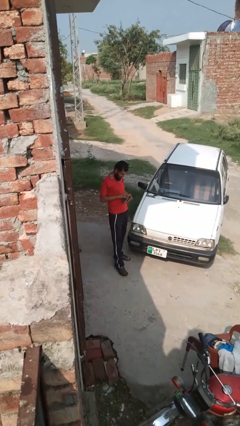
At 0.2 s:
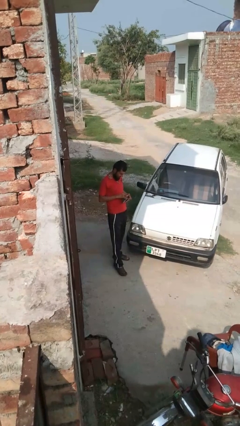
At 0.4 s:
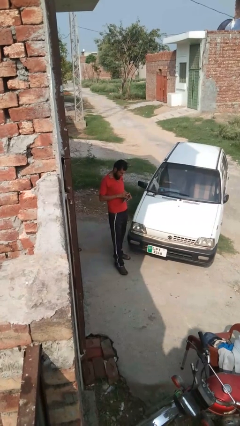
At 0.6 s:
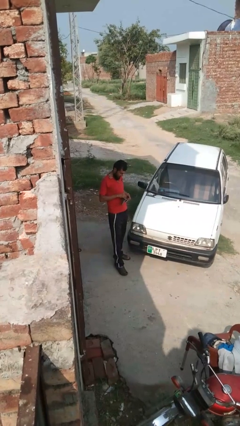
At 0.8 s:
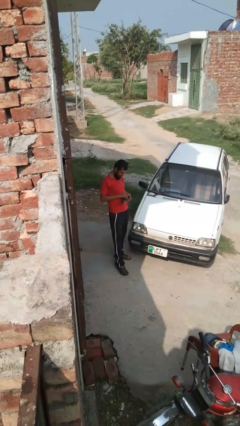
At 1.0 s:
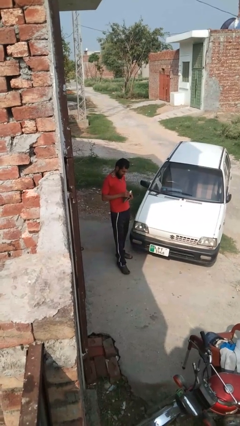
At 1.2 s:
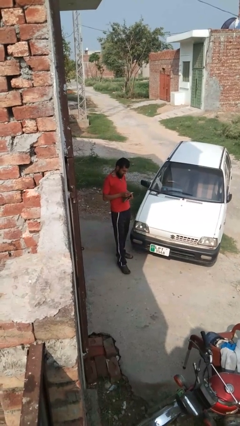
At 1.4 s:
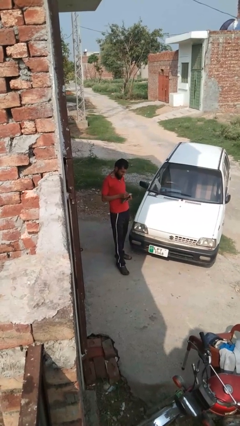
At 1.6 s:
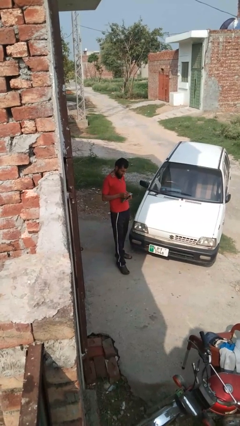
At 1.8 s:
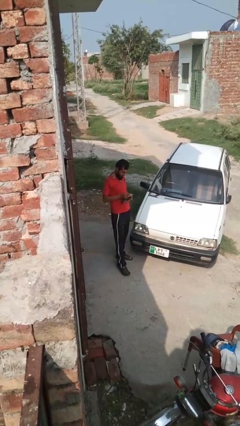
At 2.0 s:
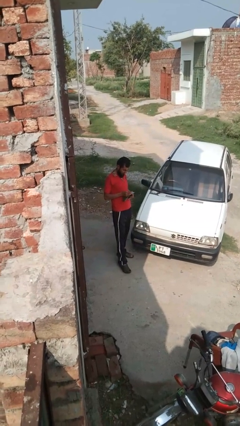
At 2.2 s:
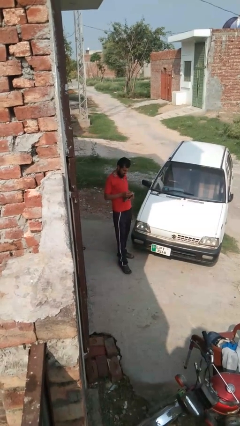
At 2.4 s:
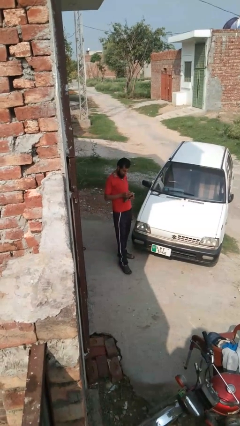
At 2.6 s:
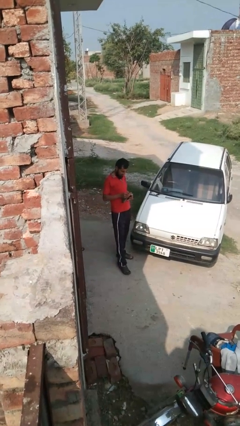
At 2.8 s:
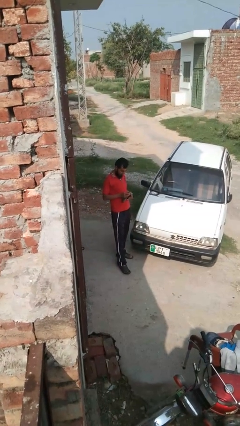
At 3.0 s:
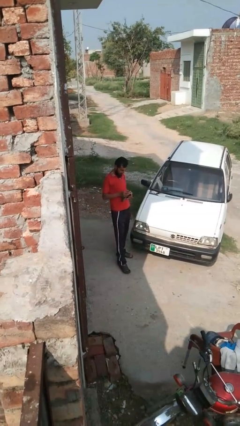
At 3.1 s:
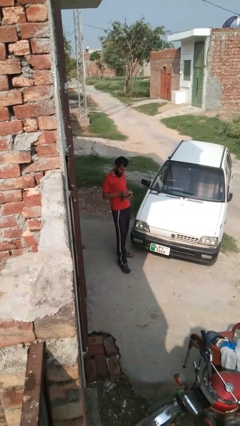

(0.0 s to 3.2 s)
person takes object from purse

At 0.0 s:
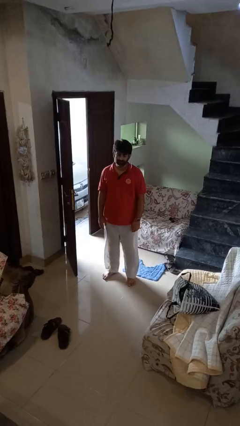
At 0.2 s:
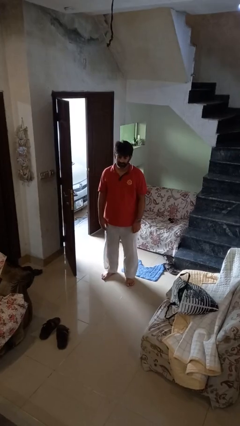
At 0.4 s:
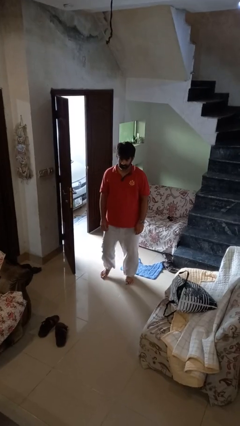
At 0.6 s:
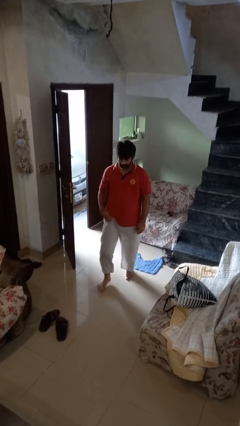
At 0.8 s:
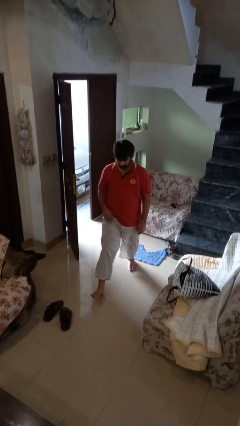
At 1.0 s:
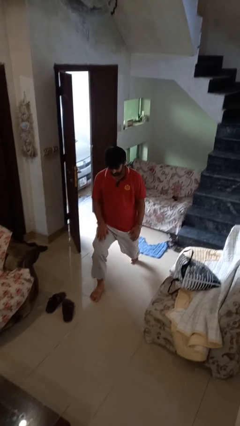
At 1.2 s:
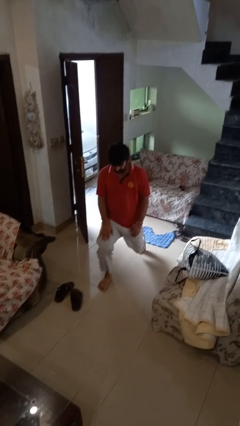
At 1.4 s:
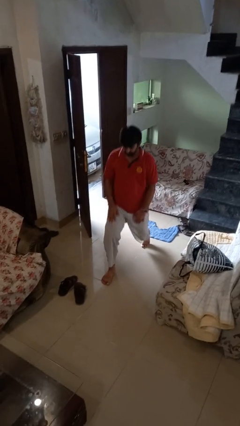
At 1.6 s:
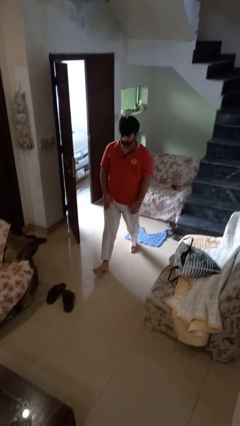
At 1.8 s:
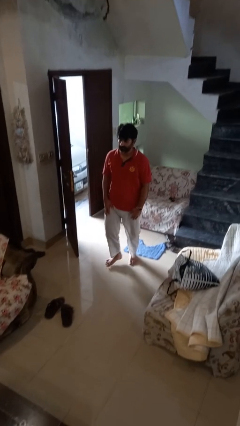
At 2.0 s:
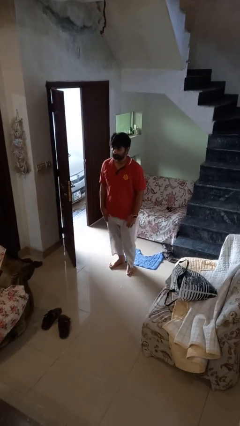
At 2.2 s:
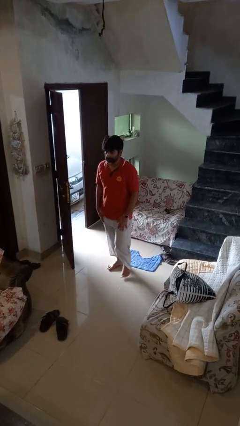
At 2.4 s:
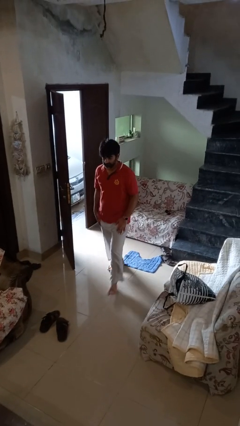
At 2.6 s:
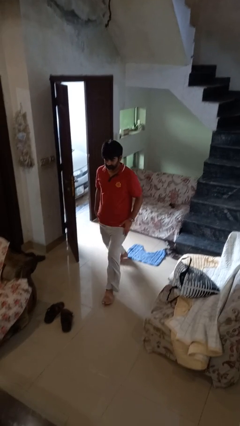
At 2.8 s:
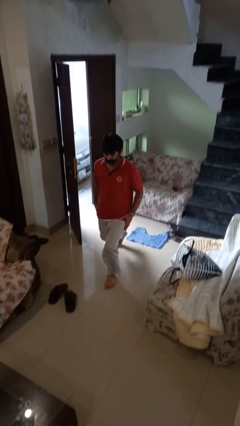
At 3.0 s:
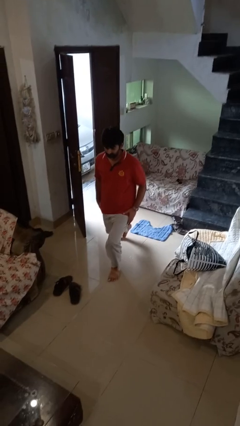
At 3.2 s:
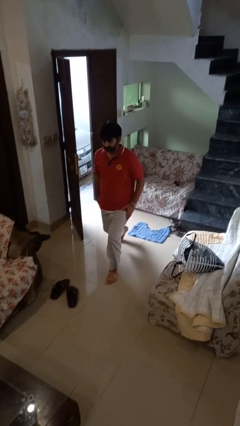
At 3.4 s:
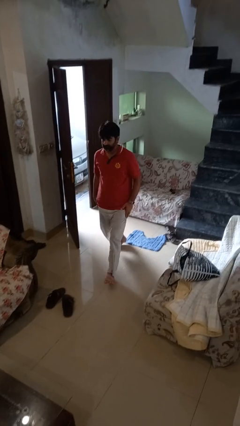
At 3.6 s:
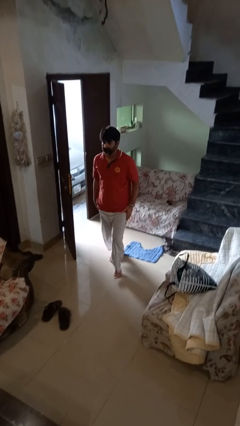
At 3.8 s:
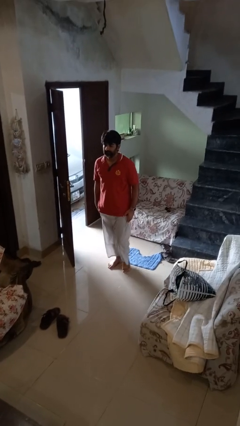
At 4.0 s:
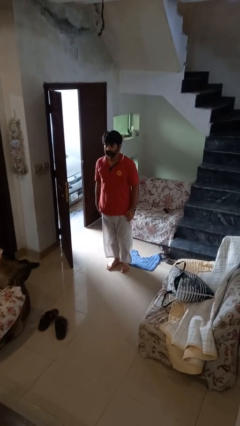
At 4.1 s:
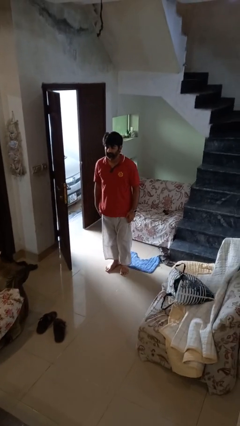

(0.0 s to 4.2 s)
person exercises with lunges

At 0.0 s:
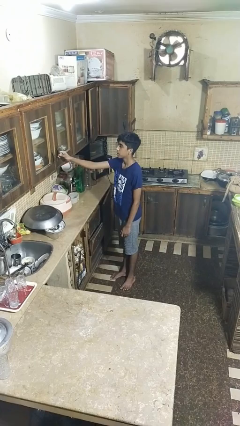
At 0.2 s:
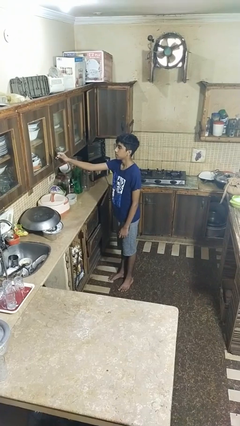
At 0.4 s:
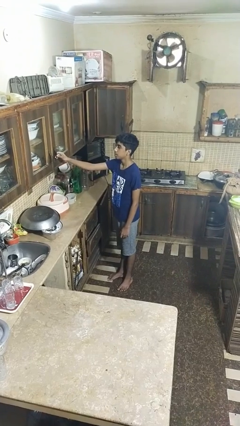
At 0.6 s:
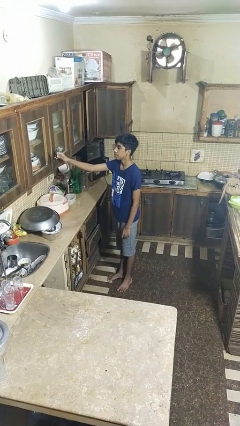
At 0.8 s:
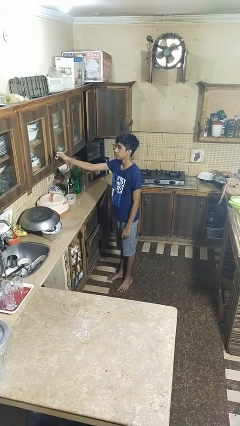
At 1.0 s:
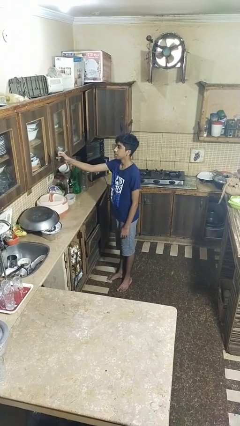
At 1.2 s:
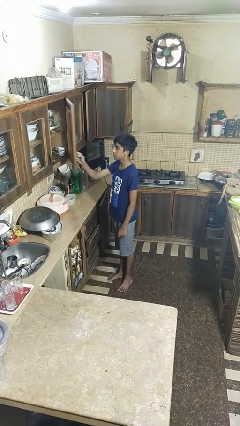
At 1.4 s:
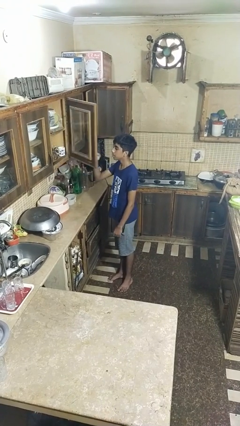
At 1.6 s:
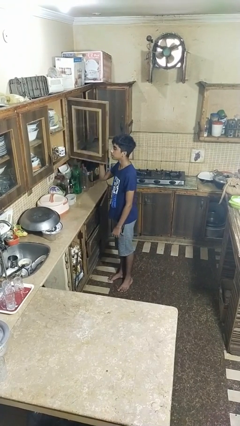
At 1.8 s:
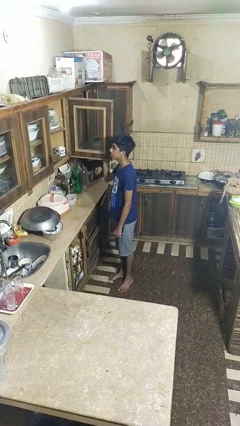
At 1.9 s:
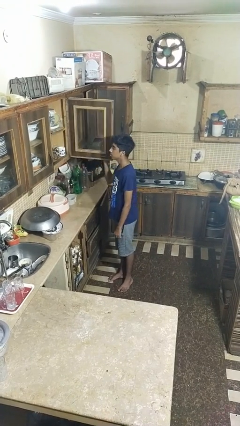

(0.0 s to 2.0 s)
person opens cabinet

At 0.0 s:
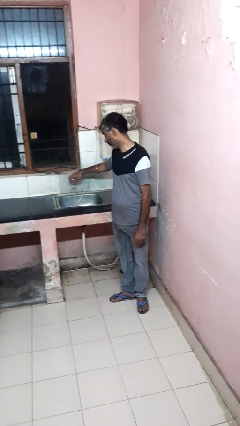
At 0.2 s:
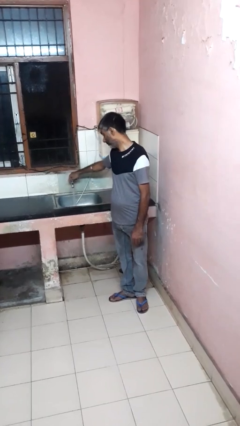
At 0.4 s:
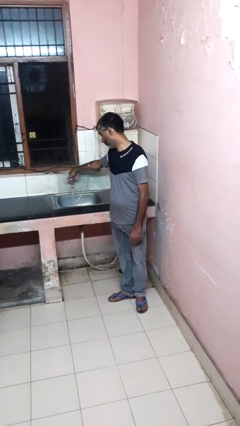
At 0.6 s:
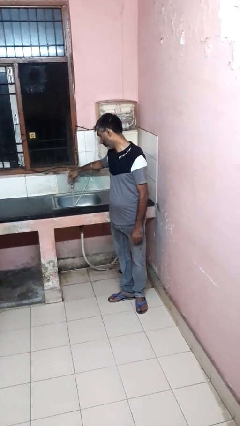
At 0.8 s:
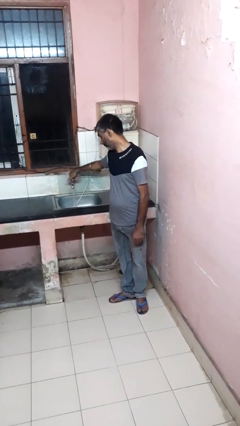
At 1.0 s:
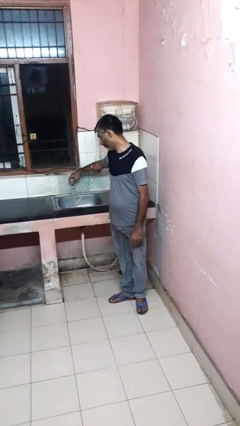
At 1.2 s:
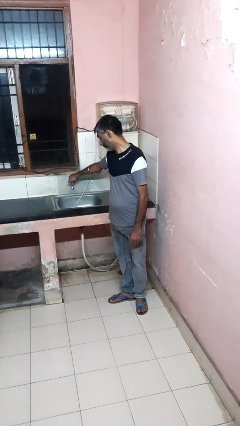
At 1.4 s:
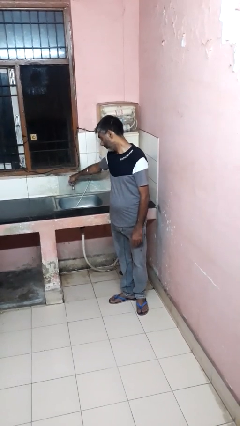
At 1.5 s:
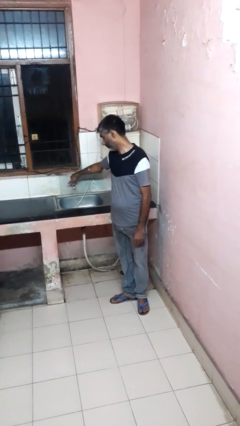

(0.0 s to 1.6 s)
person turns off faucet

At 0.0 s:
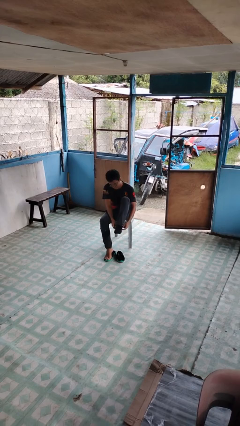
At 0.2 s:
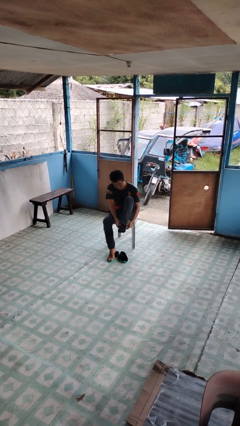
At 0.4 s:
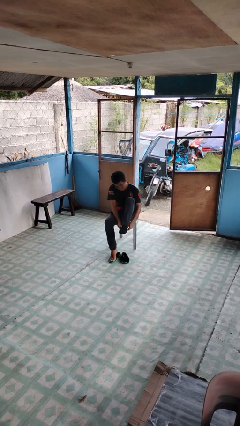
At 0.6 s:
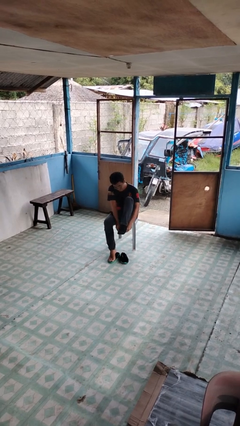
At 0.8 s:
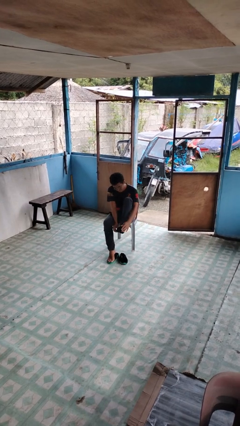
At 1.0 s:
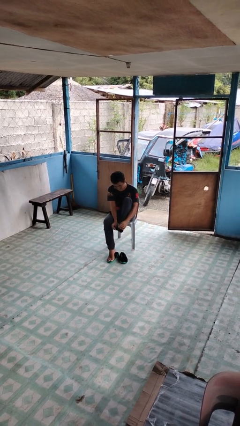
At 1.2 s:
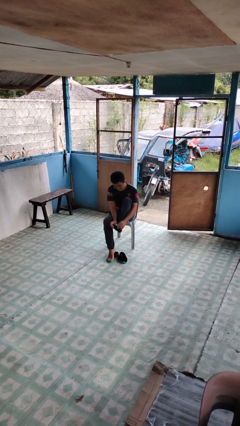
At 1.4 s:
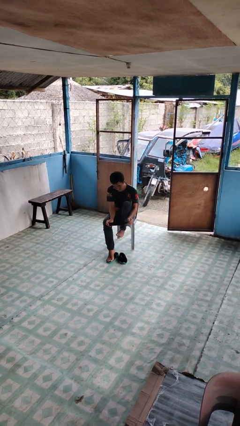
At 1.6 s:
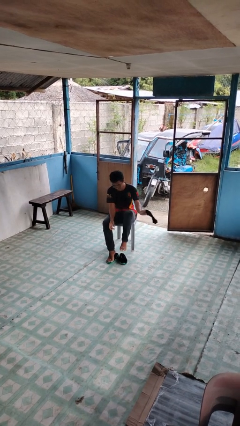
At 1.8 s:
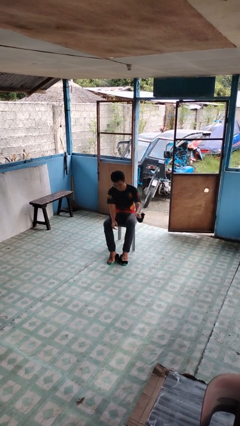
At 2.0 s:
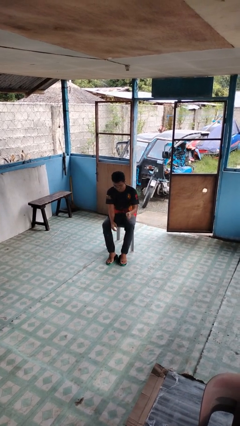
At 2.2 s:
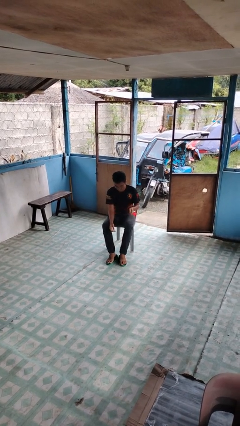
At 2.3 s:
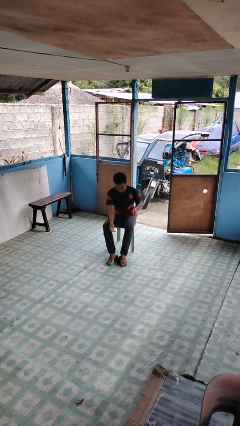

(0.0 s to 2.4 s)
person takes off socks

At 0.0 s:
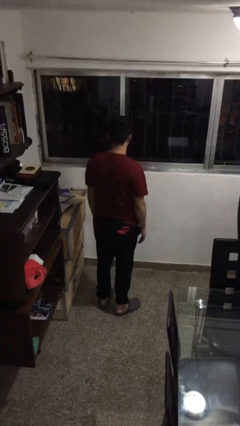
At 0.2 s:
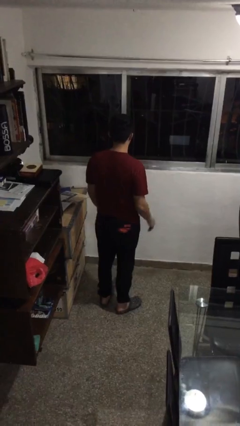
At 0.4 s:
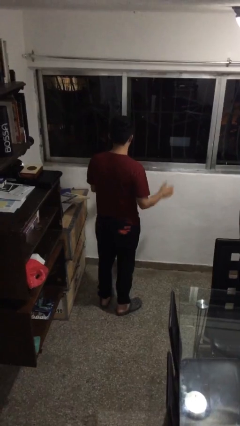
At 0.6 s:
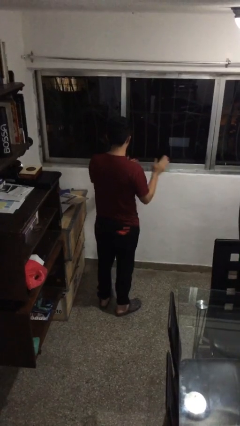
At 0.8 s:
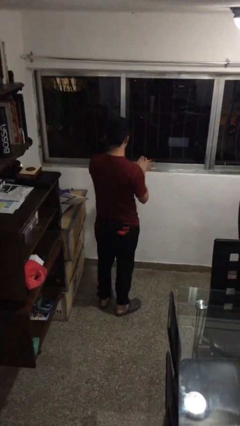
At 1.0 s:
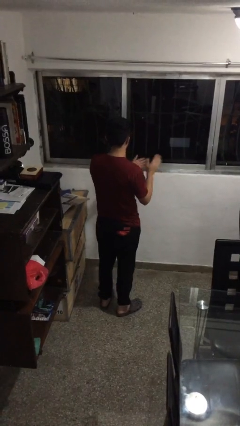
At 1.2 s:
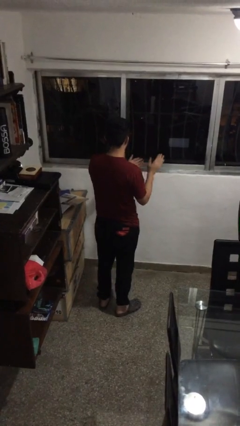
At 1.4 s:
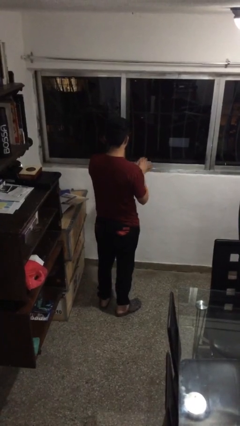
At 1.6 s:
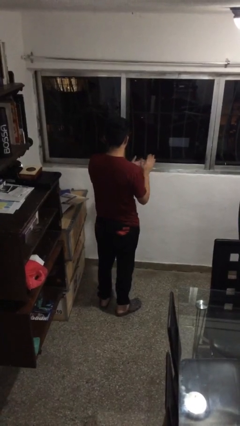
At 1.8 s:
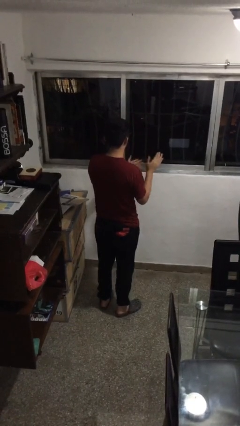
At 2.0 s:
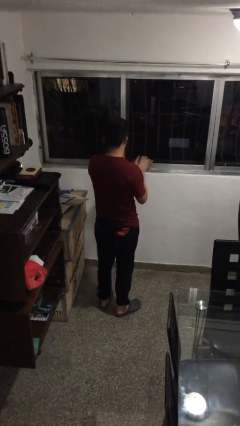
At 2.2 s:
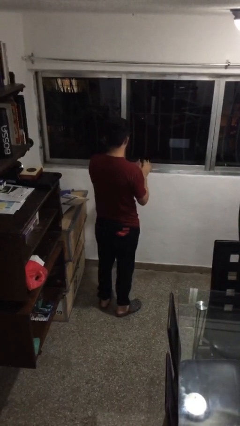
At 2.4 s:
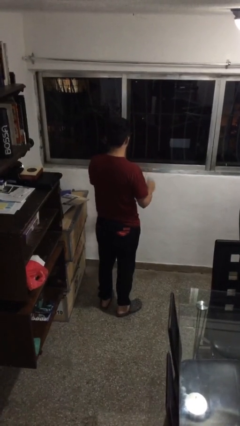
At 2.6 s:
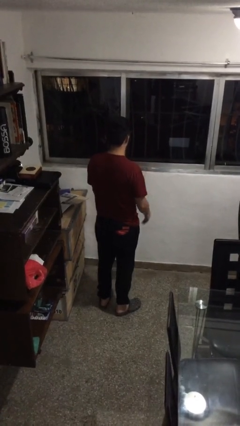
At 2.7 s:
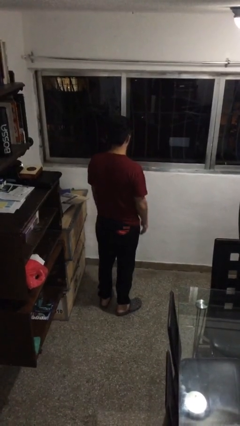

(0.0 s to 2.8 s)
person claps hands

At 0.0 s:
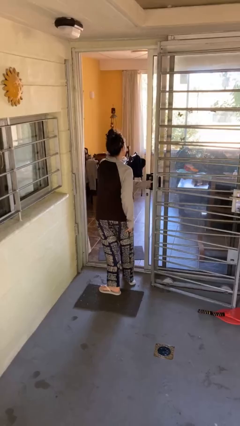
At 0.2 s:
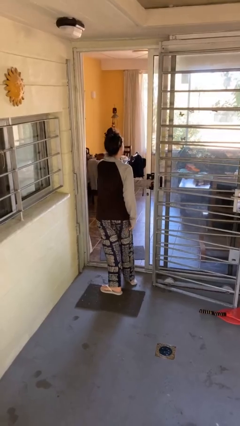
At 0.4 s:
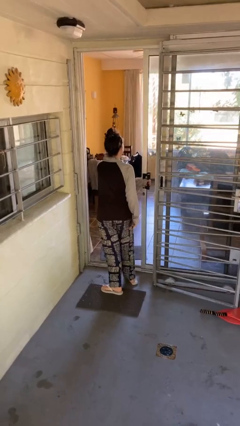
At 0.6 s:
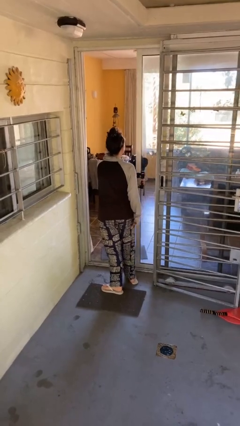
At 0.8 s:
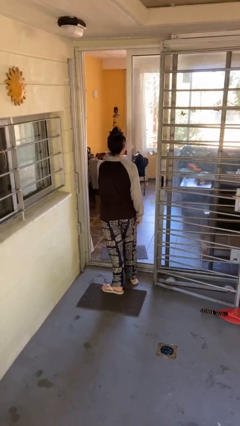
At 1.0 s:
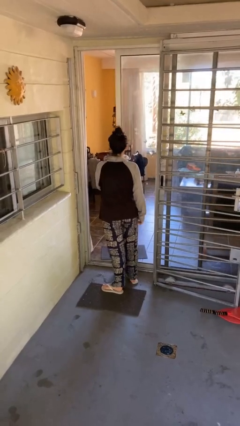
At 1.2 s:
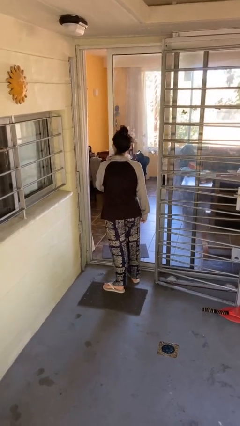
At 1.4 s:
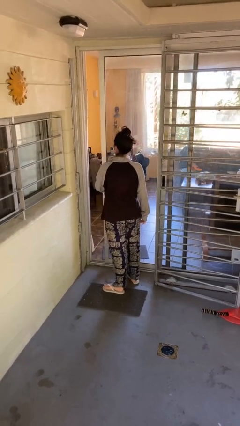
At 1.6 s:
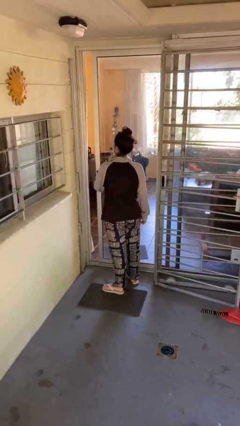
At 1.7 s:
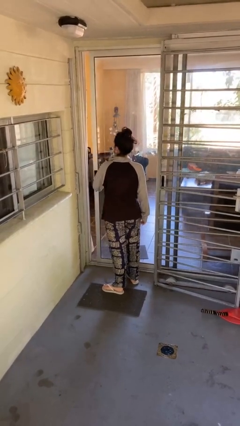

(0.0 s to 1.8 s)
person closes facility door
